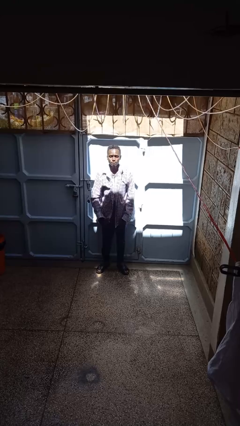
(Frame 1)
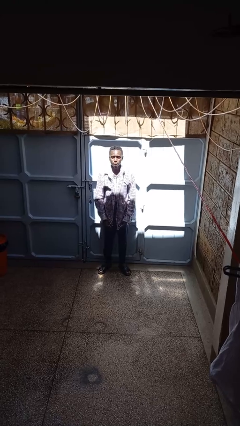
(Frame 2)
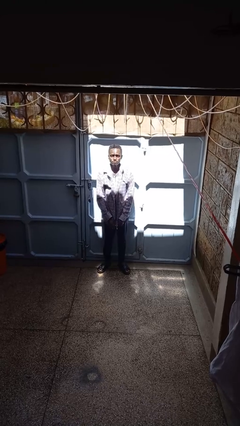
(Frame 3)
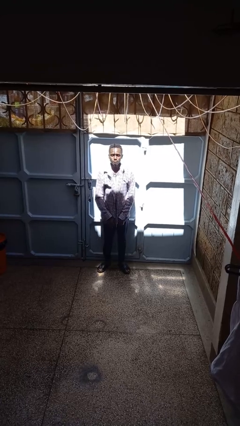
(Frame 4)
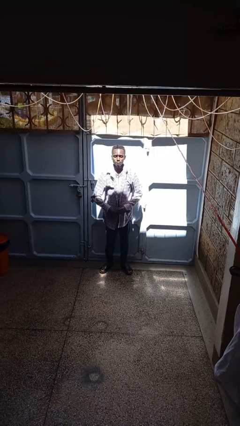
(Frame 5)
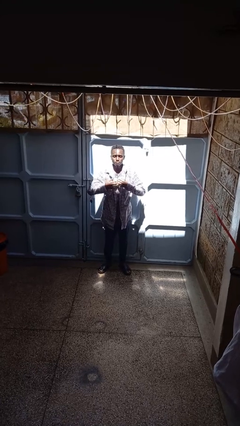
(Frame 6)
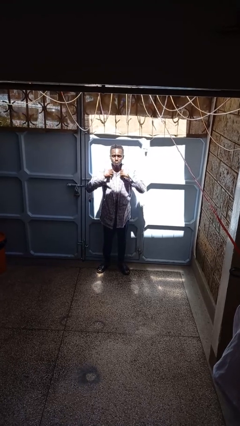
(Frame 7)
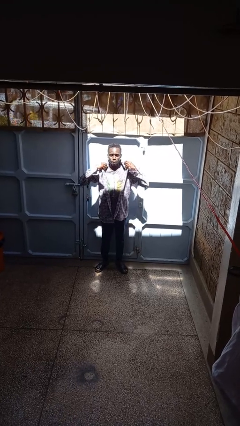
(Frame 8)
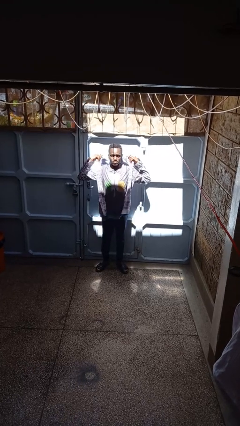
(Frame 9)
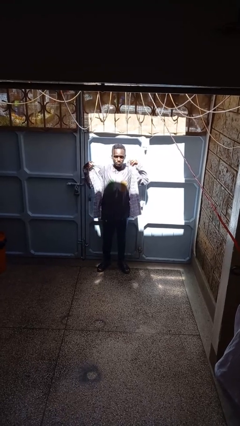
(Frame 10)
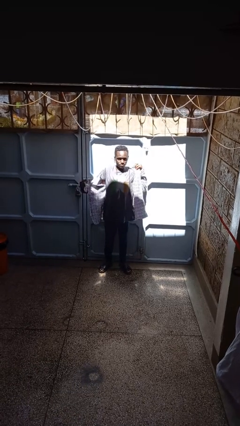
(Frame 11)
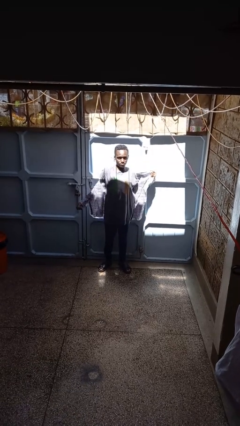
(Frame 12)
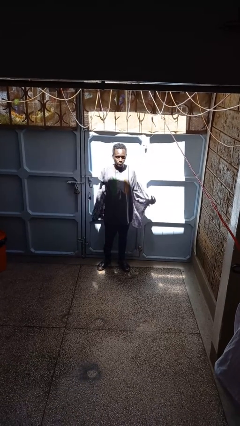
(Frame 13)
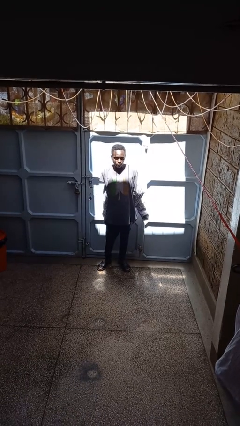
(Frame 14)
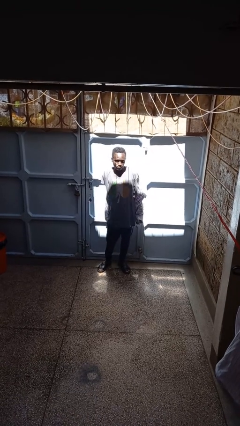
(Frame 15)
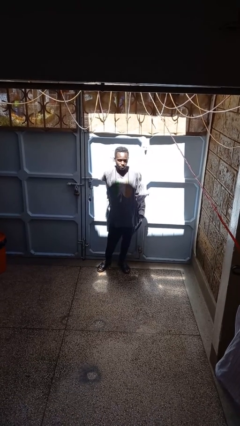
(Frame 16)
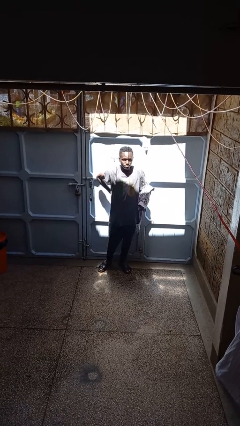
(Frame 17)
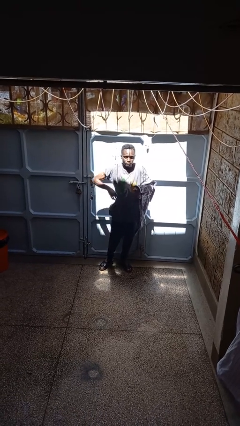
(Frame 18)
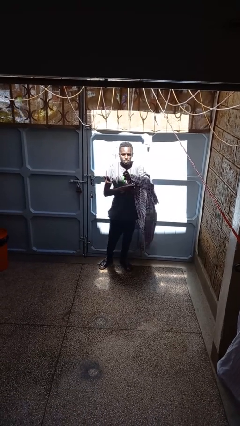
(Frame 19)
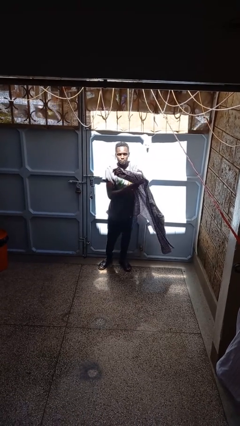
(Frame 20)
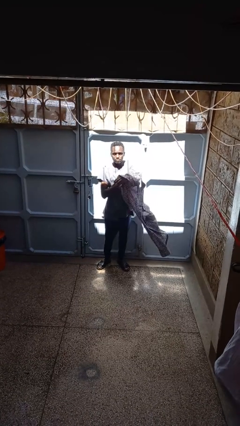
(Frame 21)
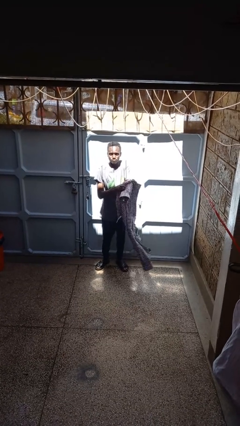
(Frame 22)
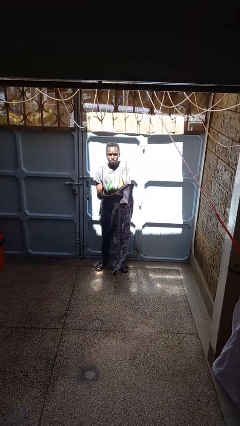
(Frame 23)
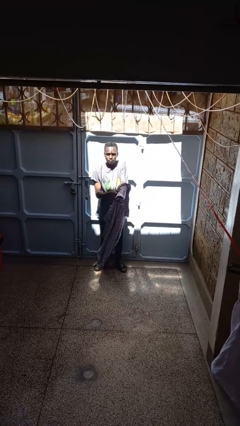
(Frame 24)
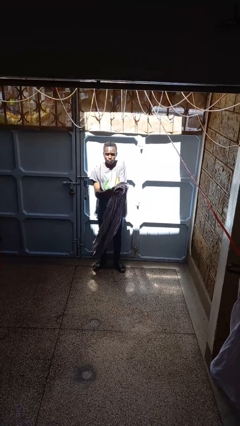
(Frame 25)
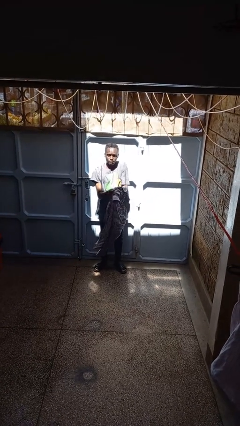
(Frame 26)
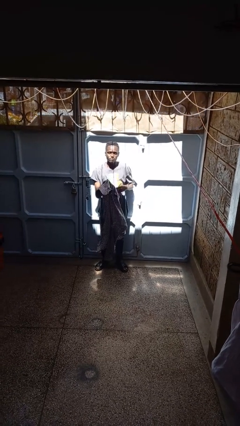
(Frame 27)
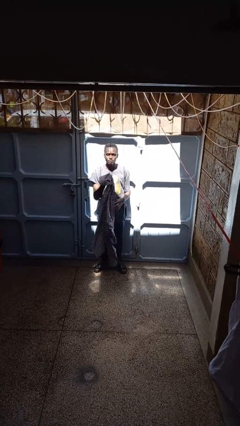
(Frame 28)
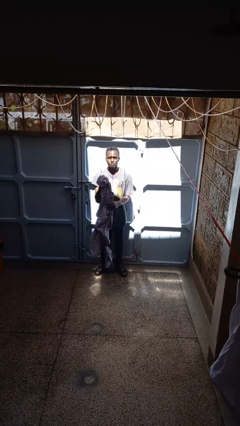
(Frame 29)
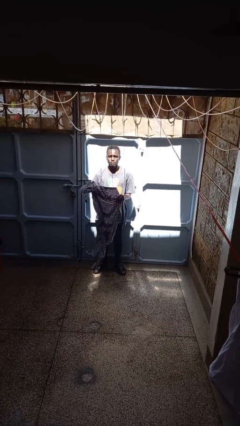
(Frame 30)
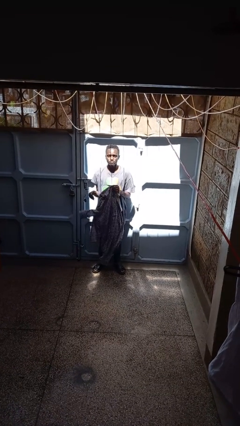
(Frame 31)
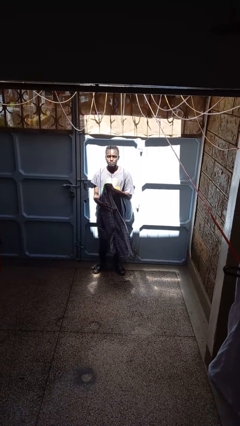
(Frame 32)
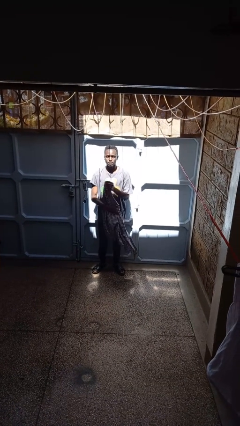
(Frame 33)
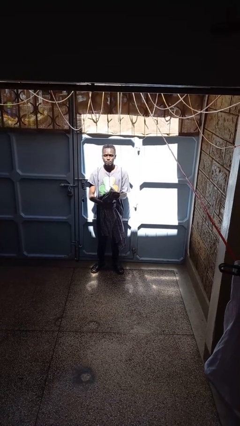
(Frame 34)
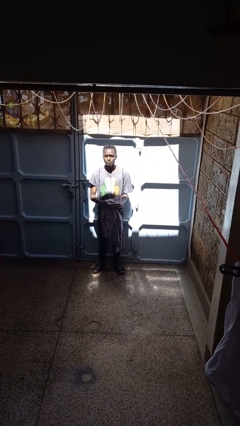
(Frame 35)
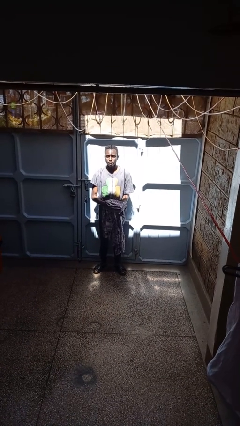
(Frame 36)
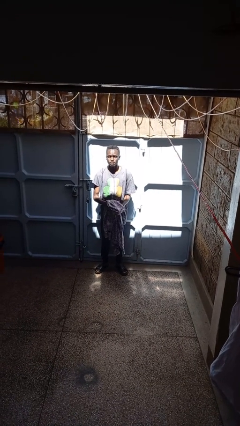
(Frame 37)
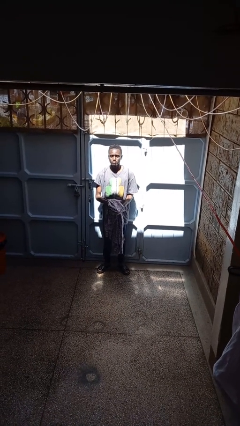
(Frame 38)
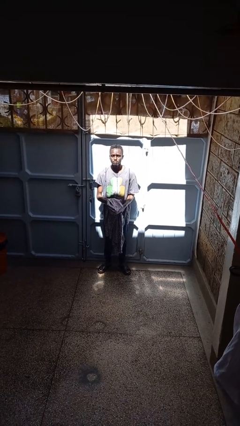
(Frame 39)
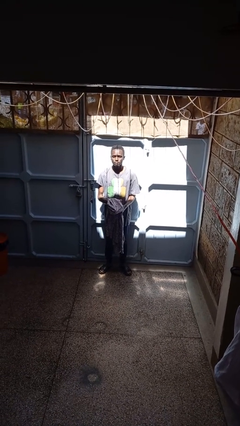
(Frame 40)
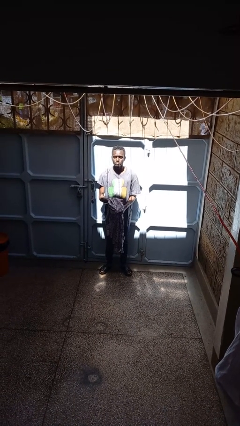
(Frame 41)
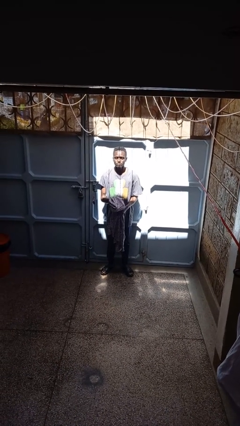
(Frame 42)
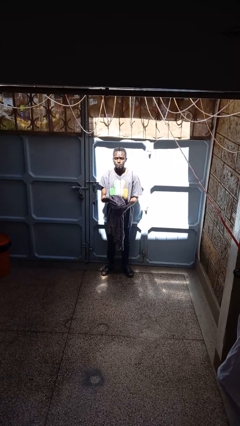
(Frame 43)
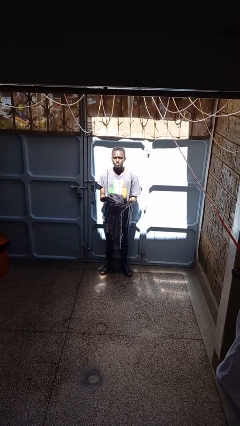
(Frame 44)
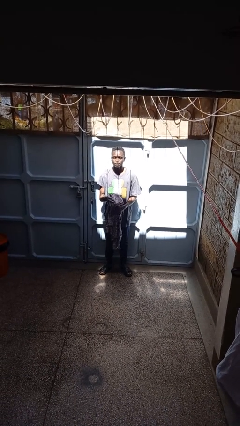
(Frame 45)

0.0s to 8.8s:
person takes off shirt

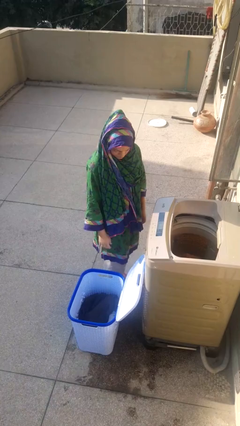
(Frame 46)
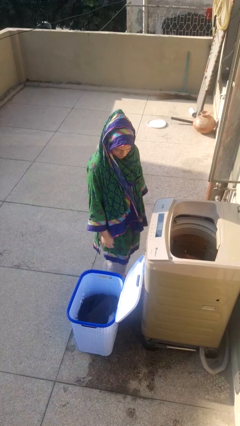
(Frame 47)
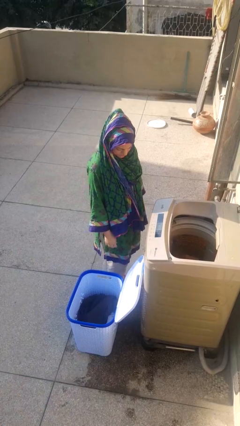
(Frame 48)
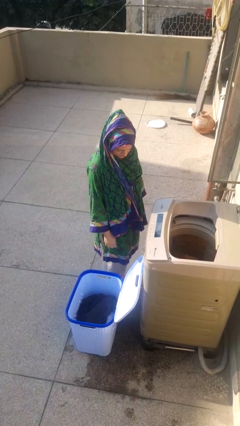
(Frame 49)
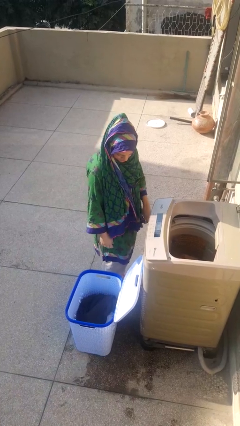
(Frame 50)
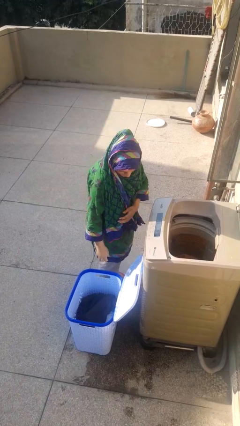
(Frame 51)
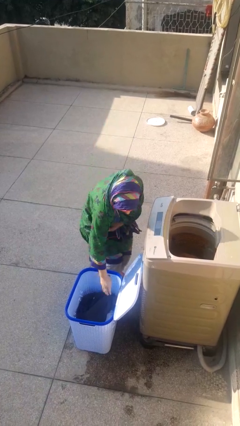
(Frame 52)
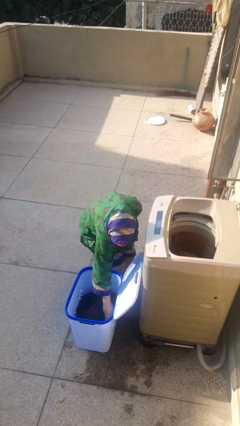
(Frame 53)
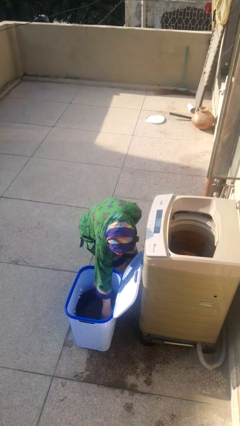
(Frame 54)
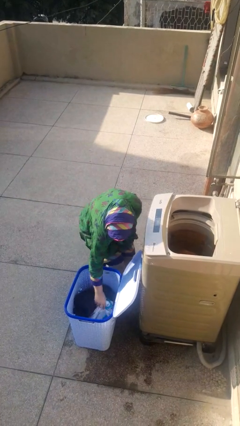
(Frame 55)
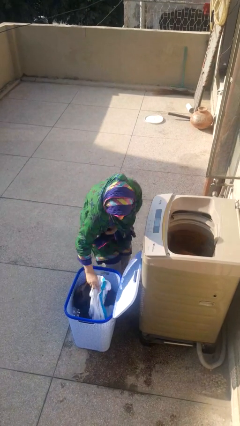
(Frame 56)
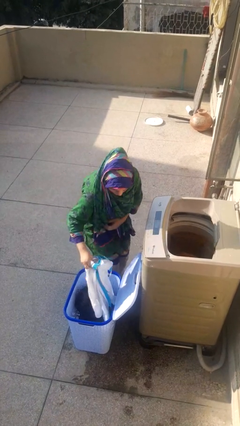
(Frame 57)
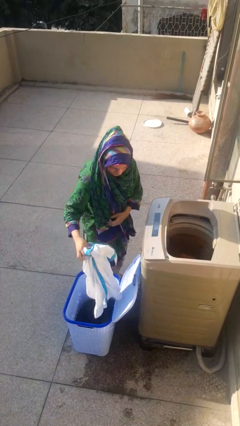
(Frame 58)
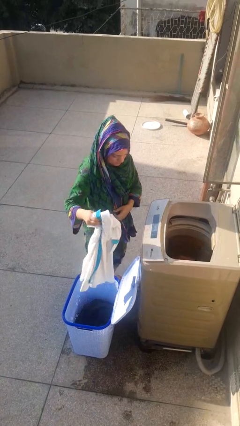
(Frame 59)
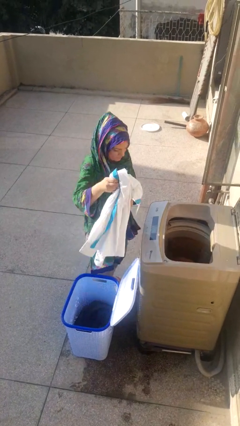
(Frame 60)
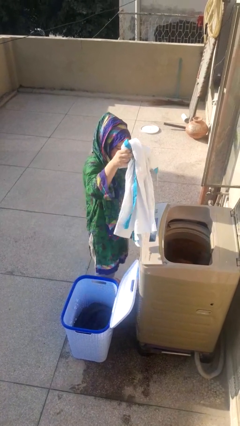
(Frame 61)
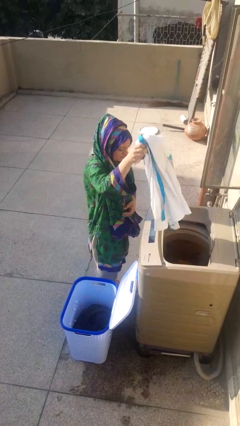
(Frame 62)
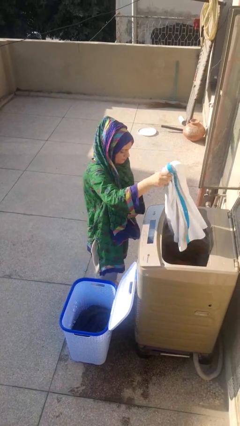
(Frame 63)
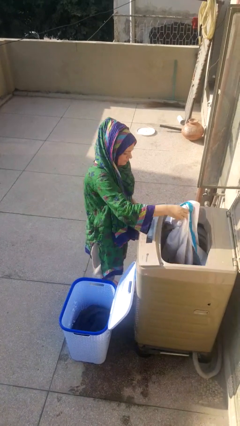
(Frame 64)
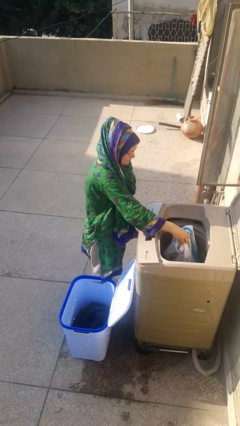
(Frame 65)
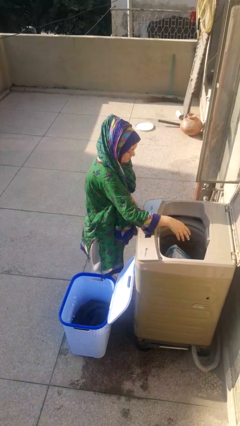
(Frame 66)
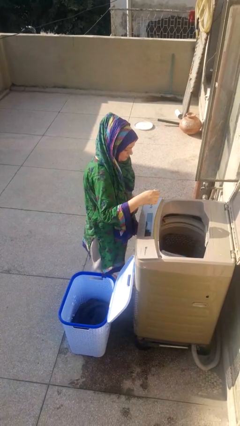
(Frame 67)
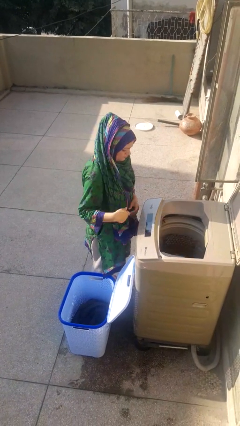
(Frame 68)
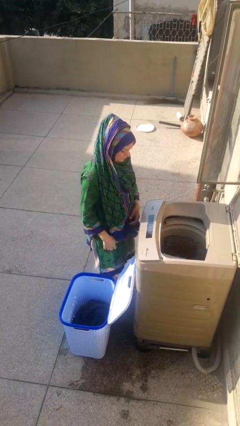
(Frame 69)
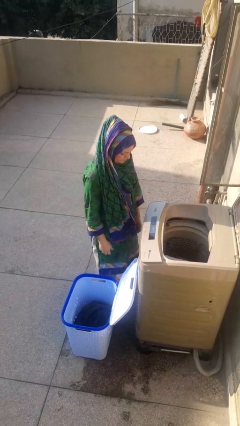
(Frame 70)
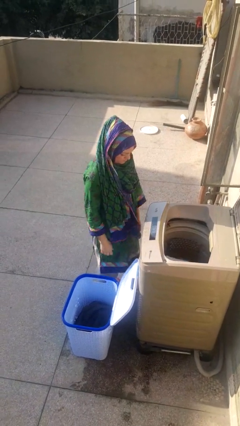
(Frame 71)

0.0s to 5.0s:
person loads clotheswasher

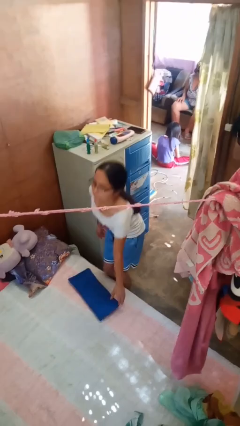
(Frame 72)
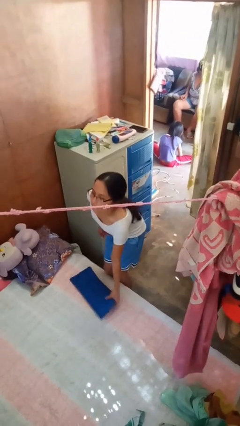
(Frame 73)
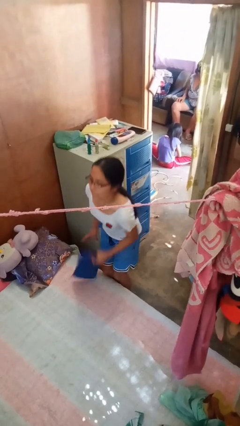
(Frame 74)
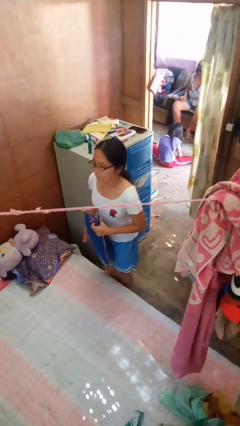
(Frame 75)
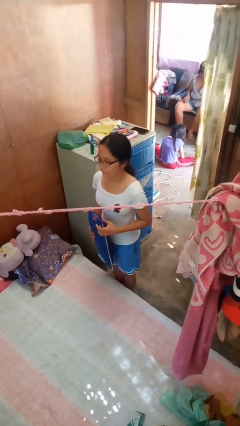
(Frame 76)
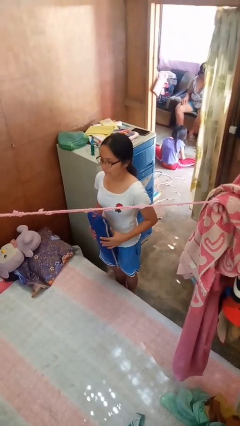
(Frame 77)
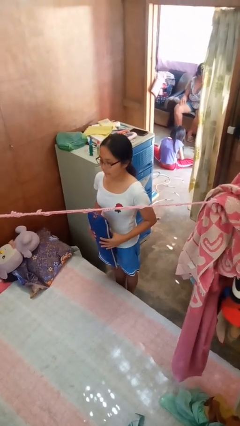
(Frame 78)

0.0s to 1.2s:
person picks up object from bed

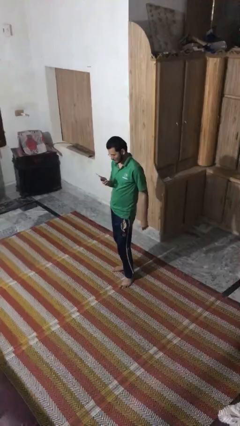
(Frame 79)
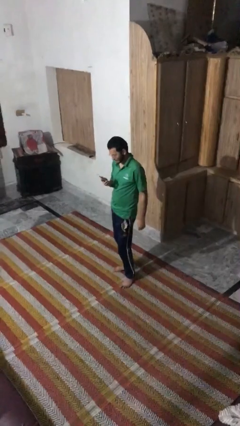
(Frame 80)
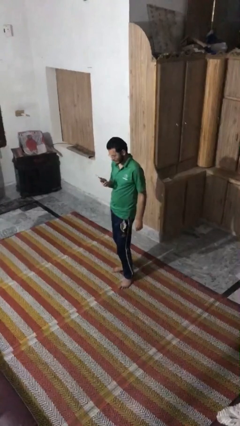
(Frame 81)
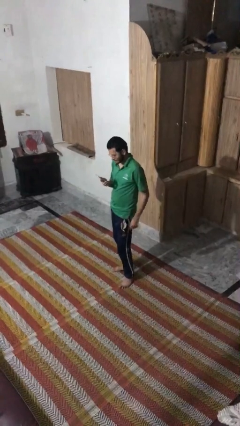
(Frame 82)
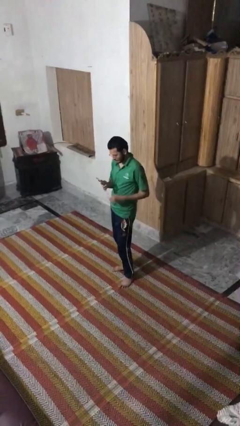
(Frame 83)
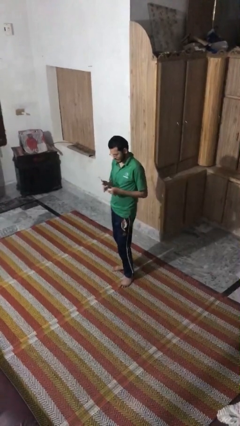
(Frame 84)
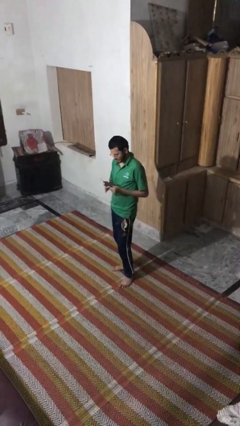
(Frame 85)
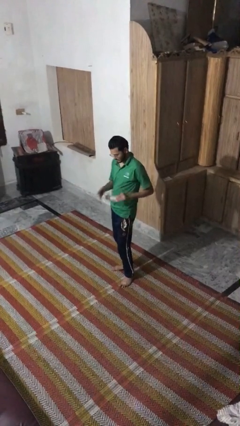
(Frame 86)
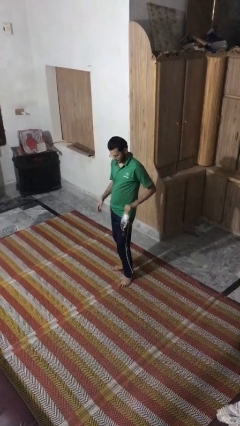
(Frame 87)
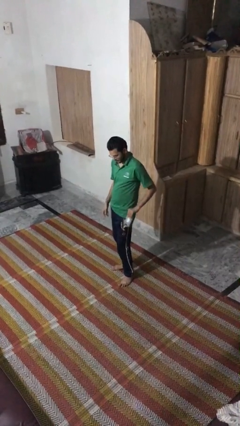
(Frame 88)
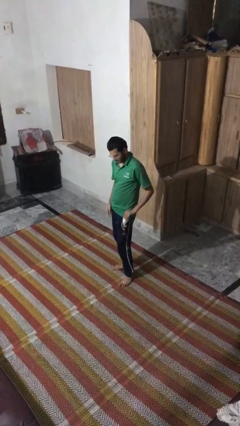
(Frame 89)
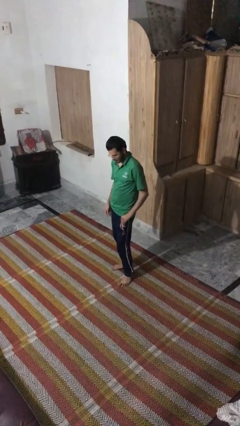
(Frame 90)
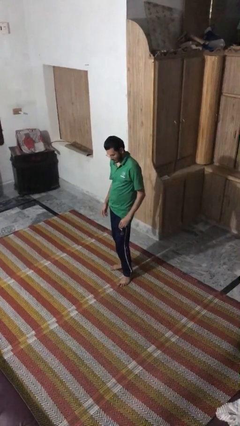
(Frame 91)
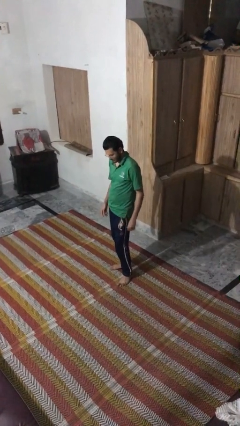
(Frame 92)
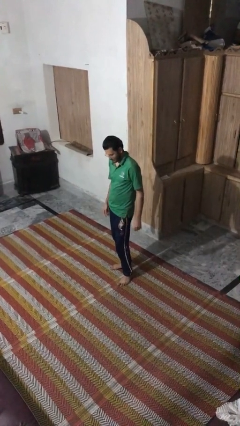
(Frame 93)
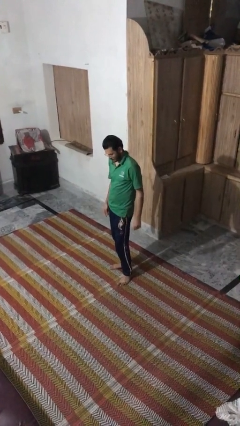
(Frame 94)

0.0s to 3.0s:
person puts phone into pocket
